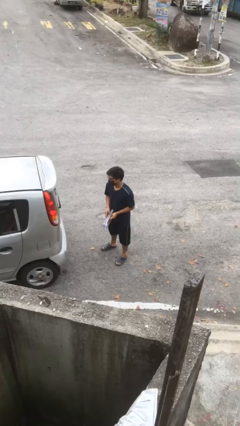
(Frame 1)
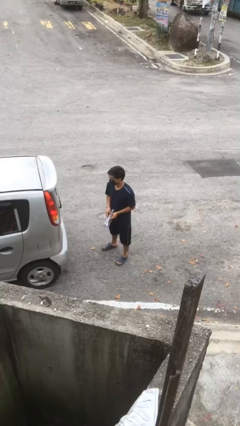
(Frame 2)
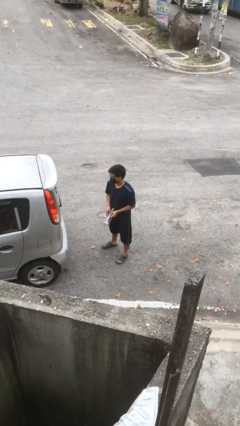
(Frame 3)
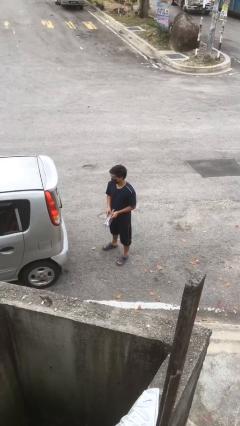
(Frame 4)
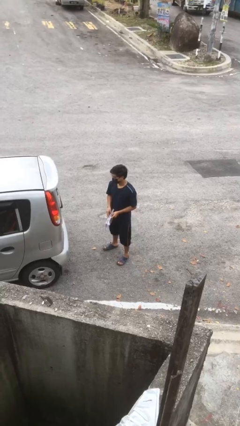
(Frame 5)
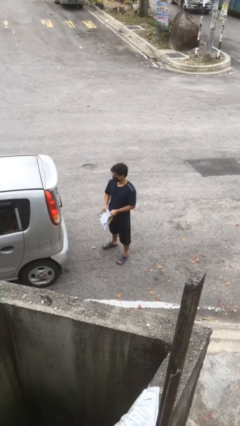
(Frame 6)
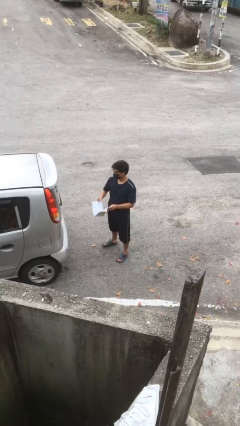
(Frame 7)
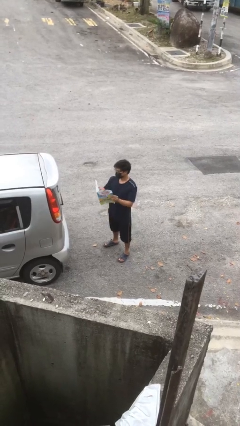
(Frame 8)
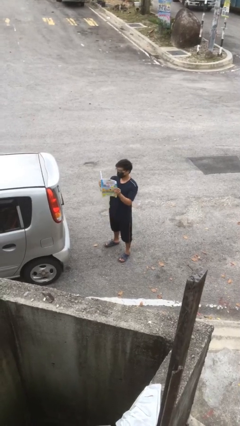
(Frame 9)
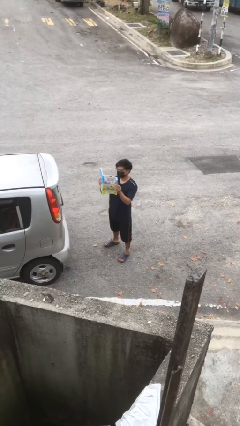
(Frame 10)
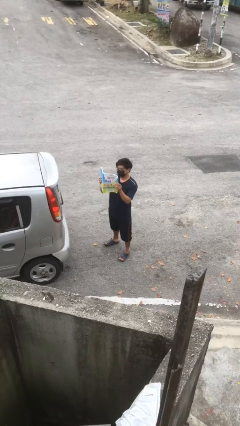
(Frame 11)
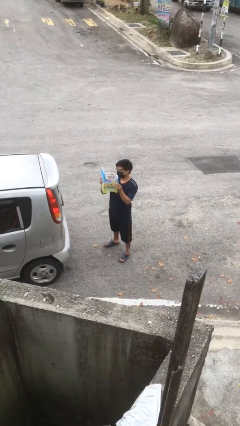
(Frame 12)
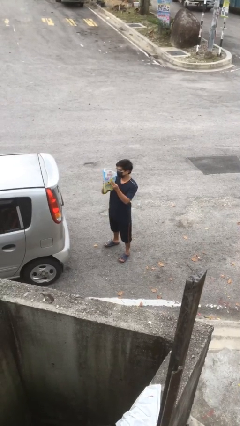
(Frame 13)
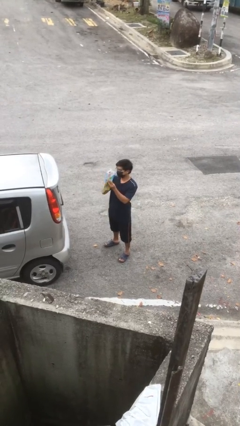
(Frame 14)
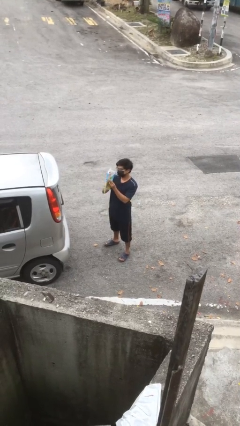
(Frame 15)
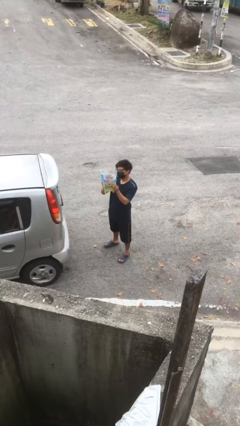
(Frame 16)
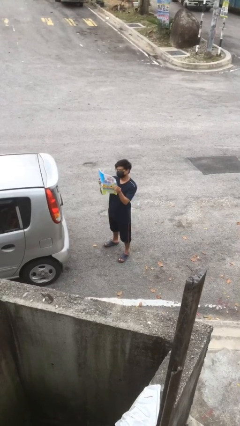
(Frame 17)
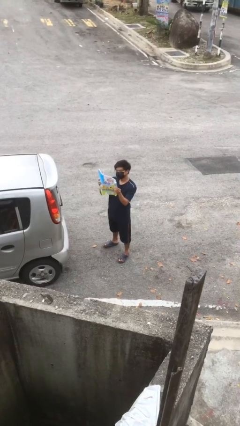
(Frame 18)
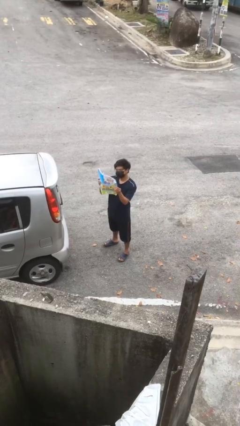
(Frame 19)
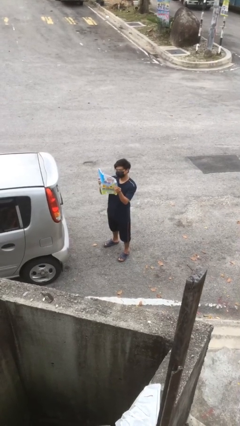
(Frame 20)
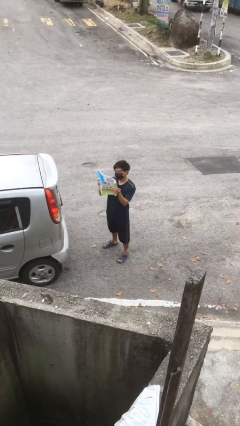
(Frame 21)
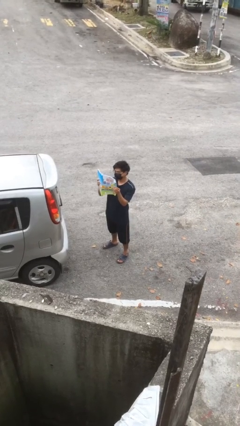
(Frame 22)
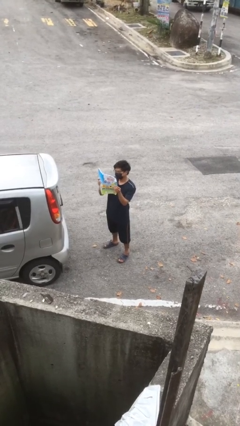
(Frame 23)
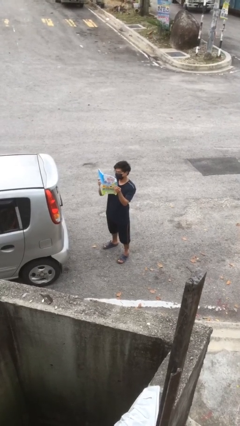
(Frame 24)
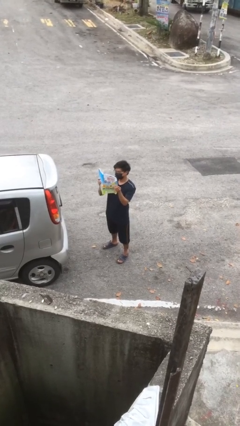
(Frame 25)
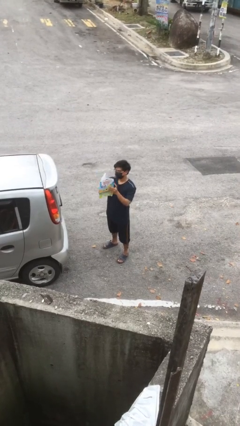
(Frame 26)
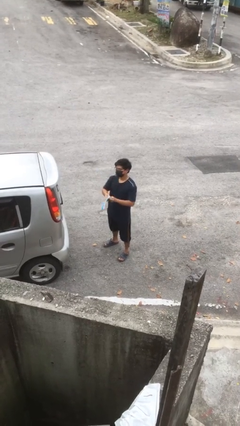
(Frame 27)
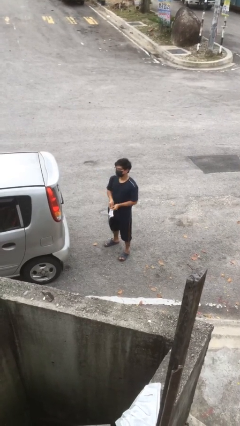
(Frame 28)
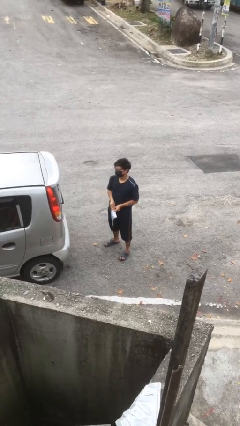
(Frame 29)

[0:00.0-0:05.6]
person reads document

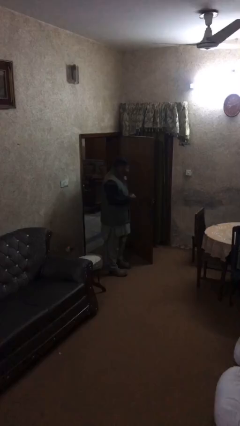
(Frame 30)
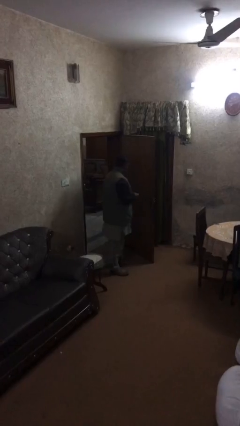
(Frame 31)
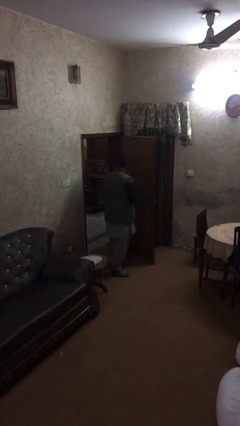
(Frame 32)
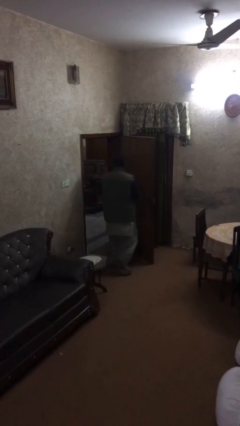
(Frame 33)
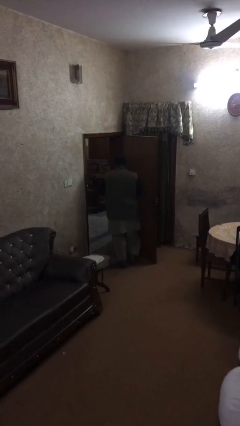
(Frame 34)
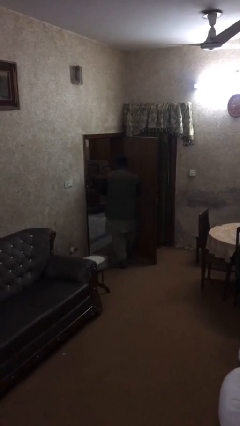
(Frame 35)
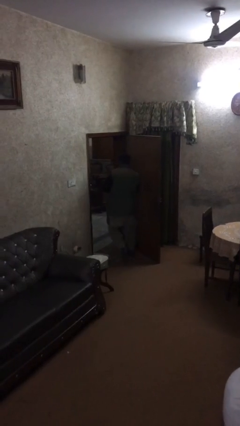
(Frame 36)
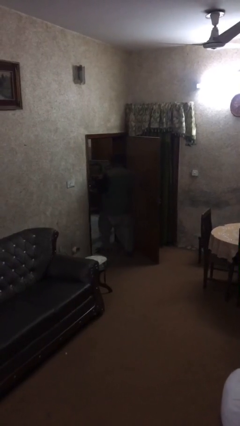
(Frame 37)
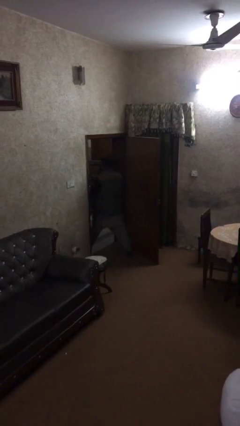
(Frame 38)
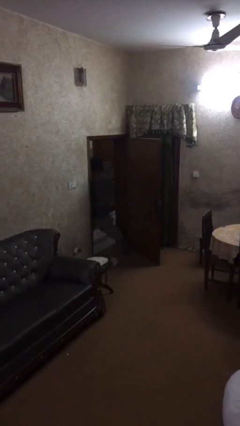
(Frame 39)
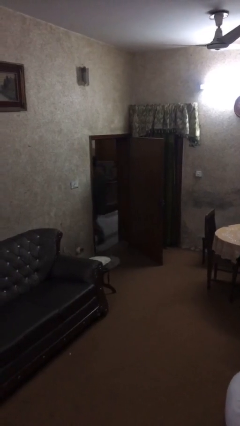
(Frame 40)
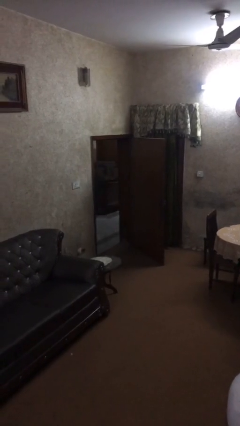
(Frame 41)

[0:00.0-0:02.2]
person exits scene through structure

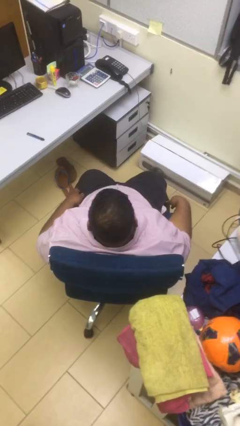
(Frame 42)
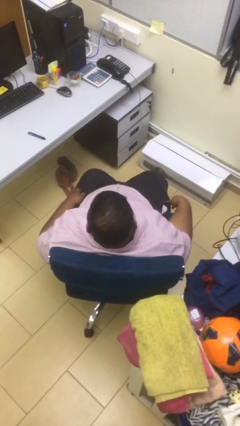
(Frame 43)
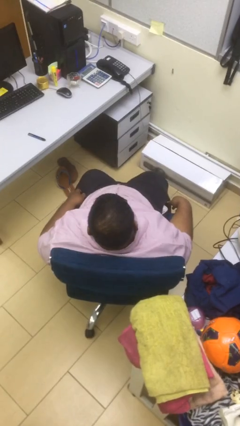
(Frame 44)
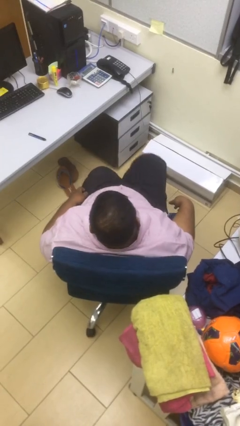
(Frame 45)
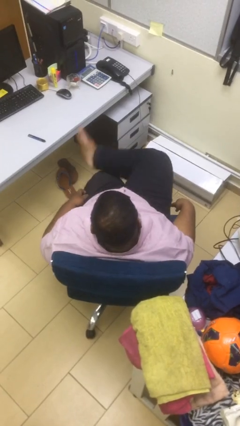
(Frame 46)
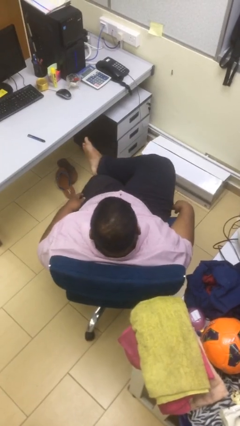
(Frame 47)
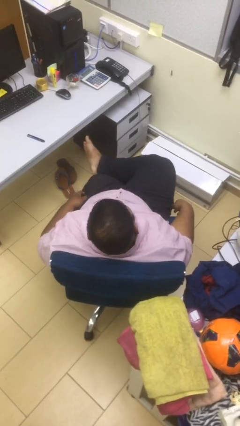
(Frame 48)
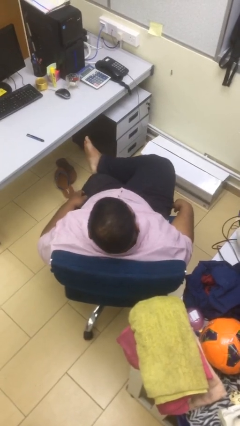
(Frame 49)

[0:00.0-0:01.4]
person crosses legs

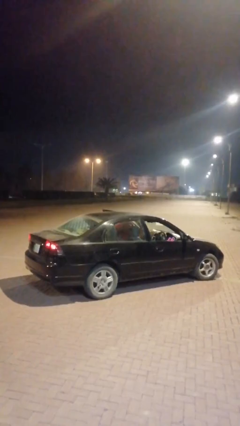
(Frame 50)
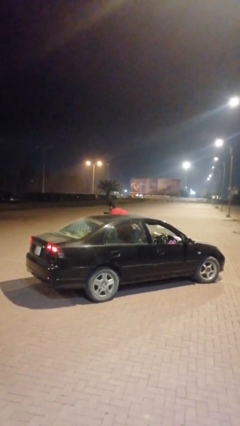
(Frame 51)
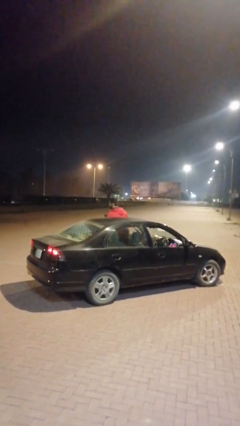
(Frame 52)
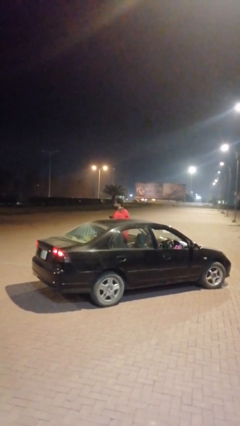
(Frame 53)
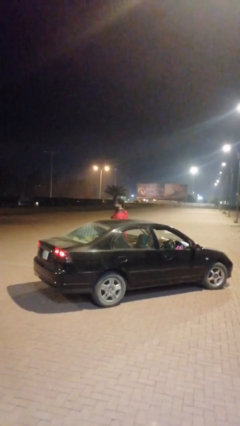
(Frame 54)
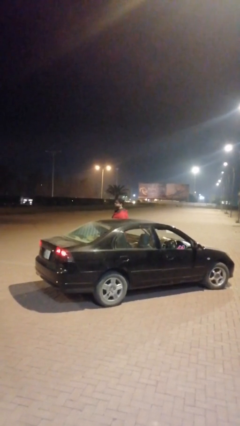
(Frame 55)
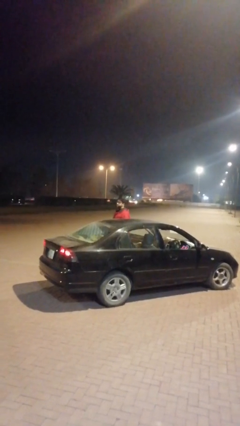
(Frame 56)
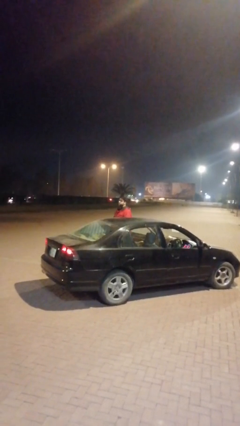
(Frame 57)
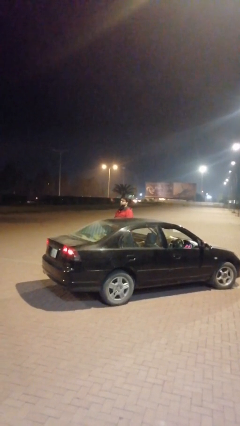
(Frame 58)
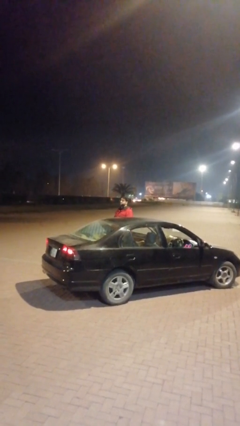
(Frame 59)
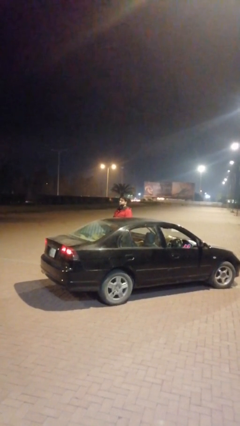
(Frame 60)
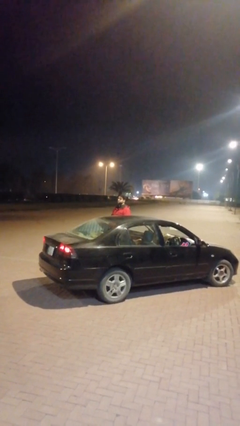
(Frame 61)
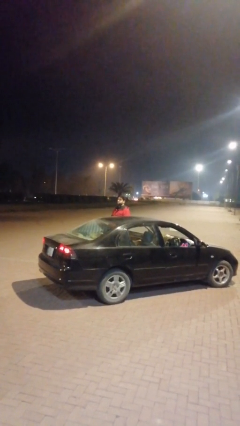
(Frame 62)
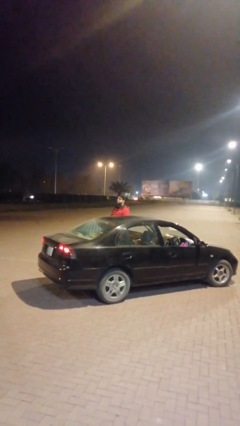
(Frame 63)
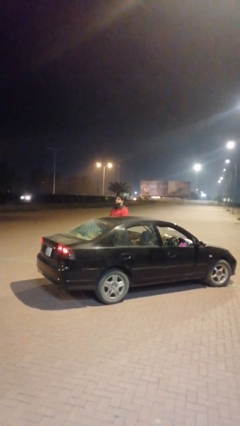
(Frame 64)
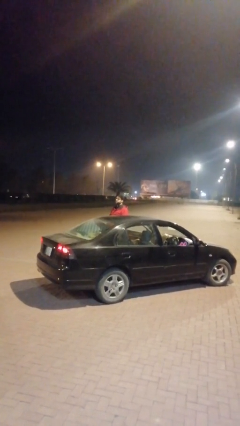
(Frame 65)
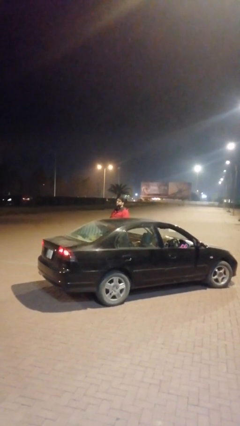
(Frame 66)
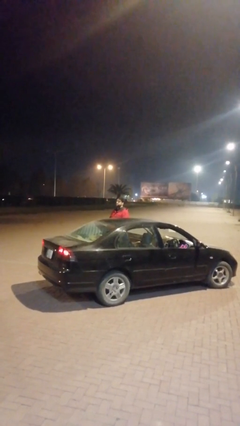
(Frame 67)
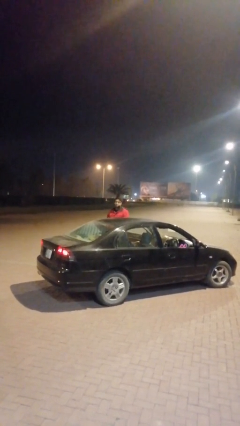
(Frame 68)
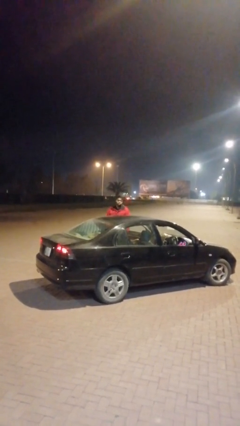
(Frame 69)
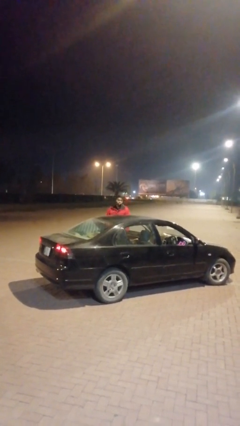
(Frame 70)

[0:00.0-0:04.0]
person exits car

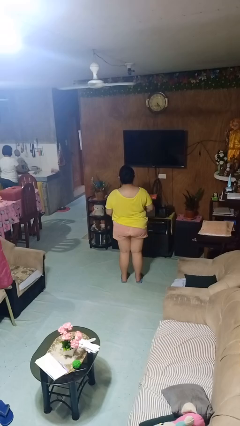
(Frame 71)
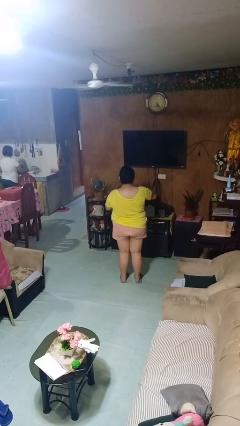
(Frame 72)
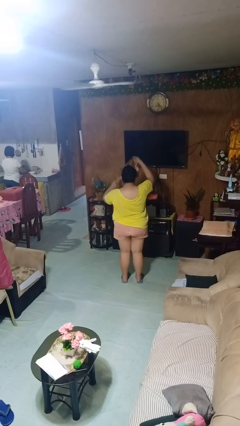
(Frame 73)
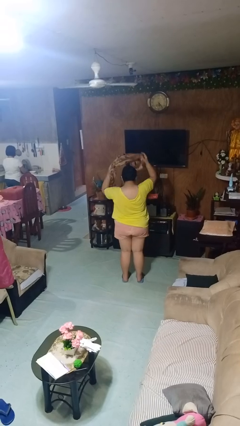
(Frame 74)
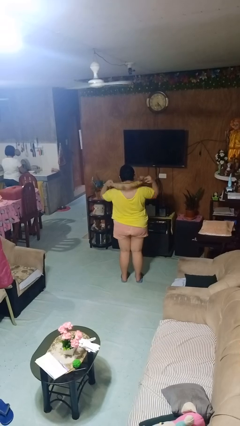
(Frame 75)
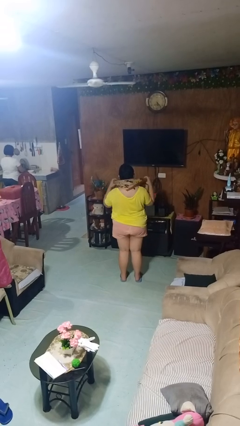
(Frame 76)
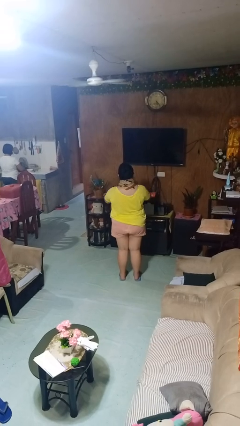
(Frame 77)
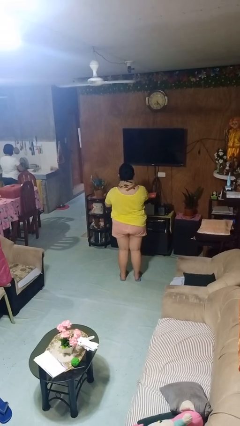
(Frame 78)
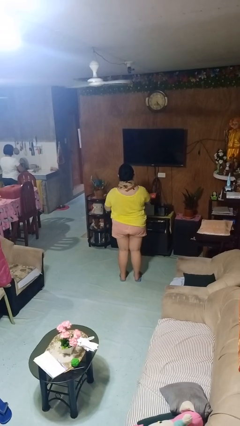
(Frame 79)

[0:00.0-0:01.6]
person puts on scarf

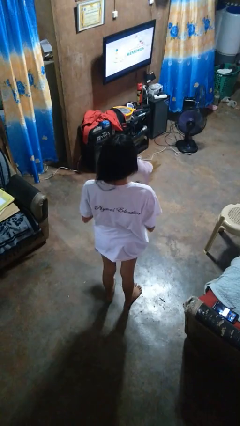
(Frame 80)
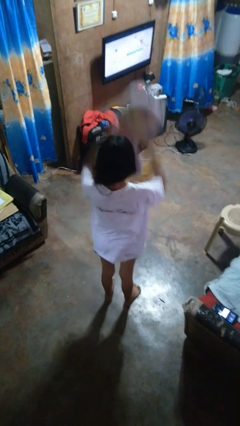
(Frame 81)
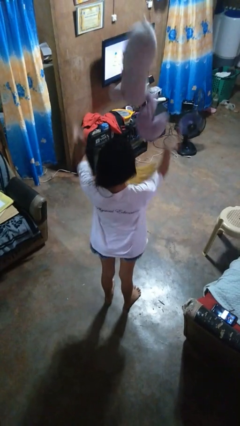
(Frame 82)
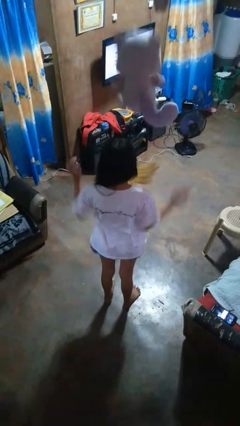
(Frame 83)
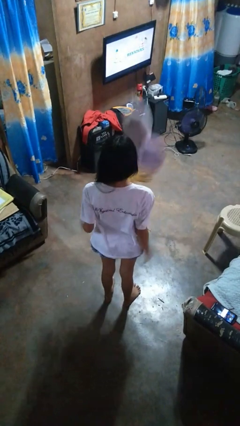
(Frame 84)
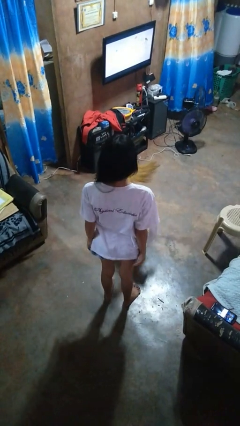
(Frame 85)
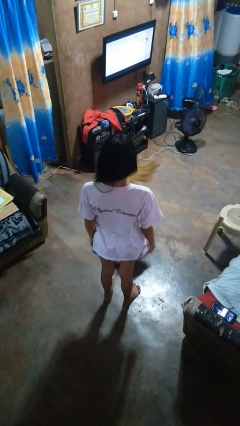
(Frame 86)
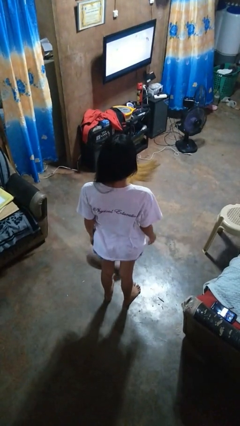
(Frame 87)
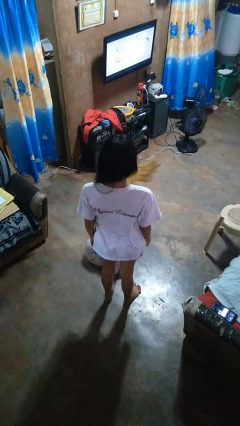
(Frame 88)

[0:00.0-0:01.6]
person throws object into air

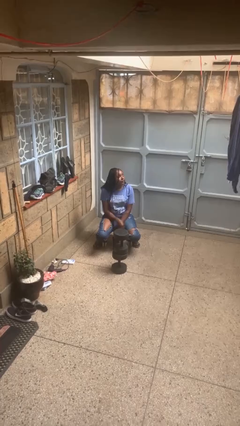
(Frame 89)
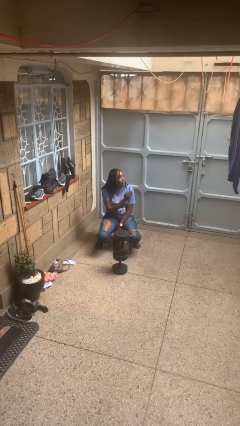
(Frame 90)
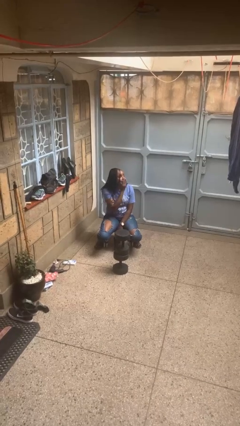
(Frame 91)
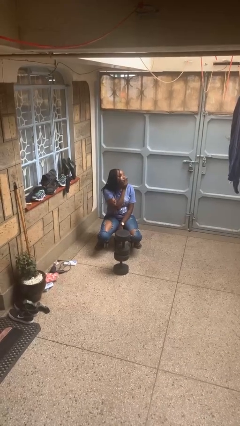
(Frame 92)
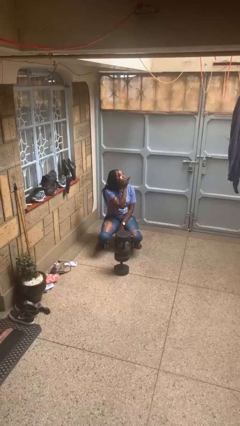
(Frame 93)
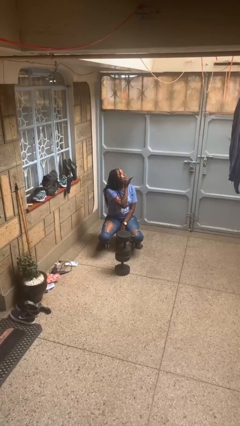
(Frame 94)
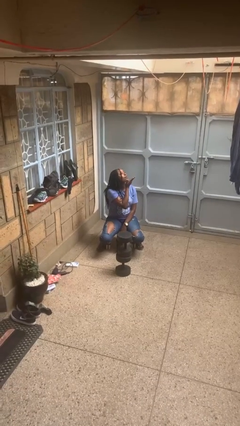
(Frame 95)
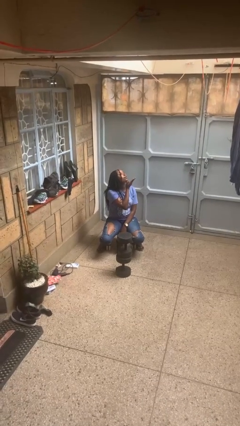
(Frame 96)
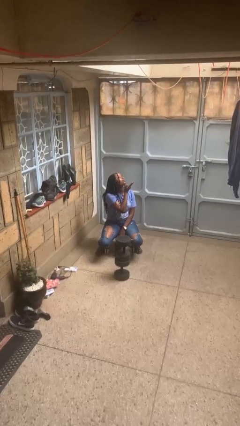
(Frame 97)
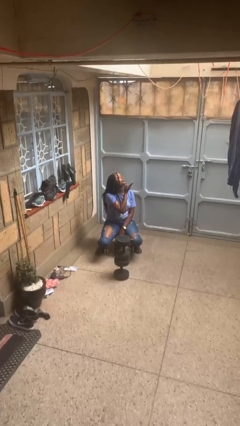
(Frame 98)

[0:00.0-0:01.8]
person gestures blow kiss
